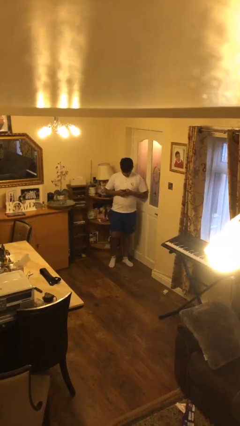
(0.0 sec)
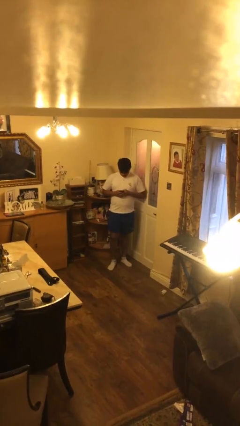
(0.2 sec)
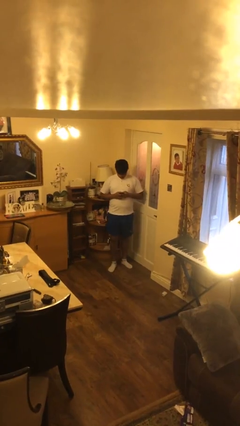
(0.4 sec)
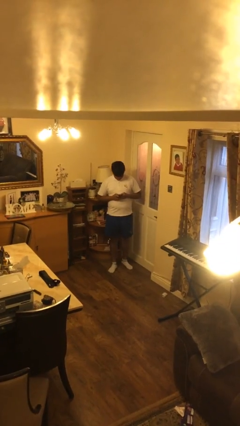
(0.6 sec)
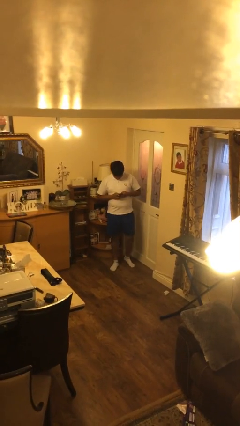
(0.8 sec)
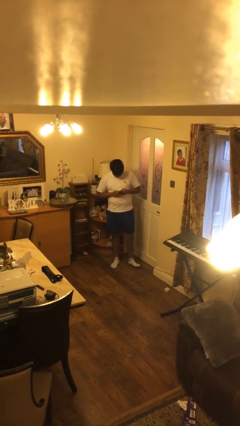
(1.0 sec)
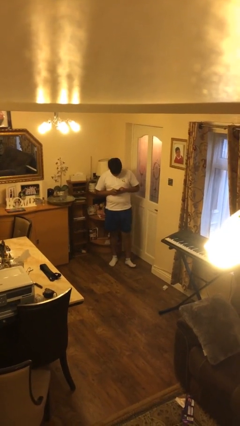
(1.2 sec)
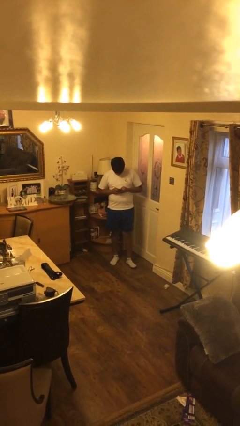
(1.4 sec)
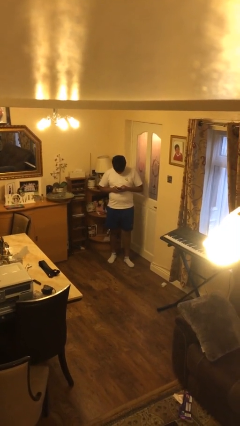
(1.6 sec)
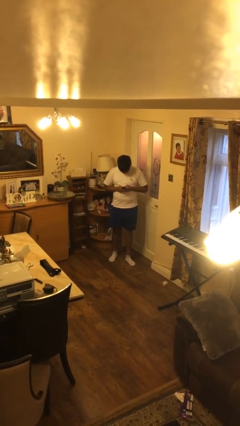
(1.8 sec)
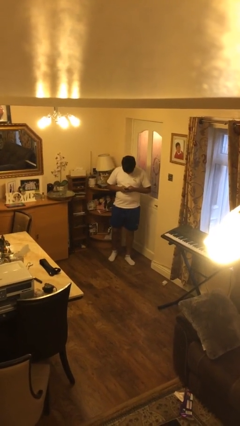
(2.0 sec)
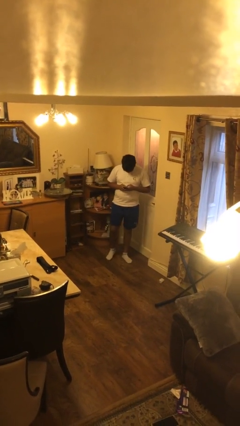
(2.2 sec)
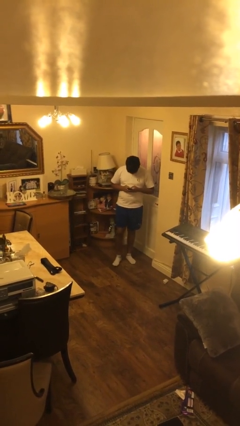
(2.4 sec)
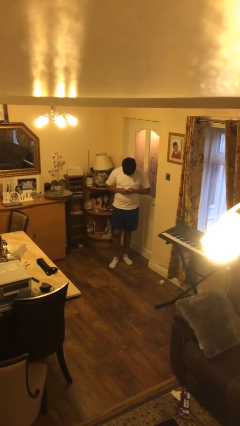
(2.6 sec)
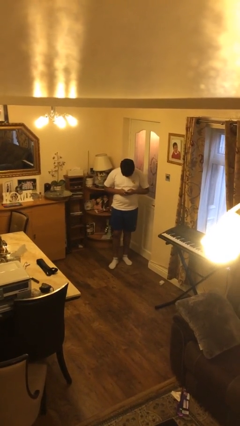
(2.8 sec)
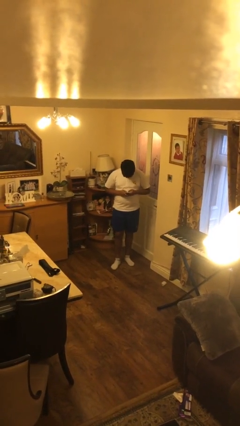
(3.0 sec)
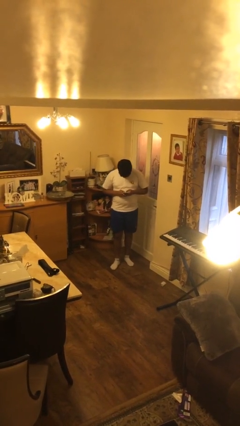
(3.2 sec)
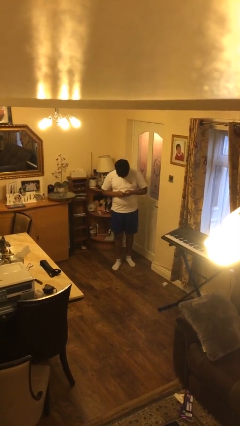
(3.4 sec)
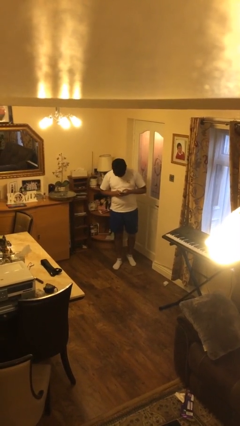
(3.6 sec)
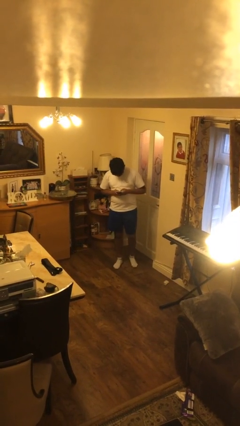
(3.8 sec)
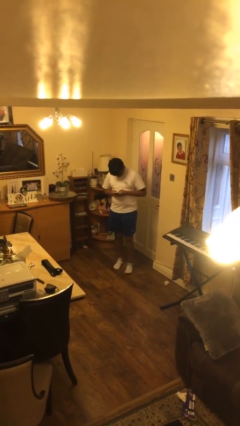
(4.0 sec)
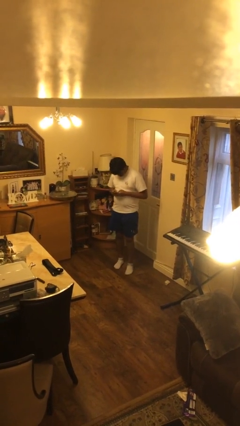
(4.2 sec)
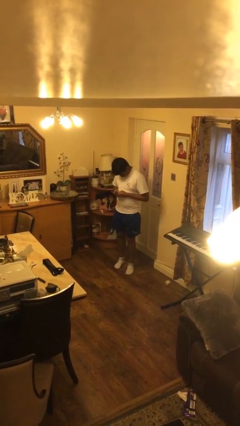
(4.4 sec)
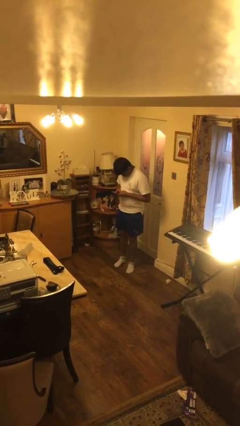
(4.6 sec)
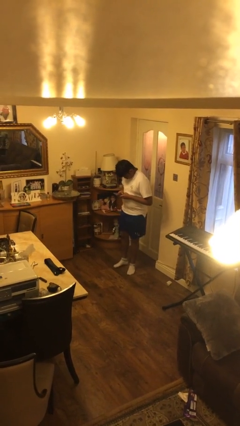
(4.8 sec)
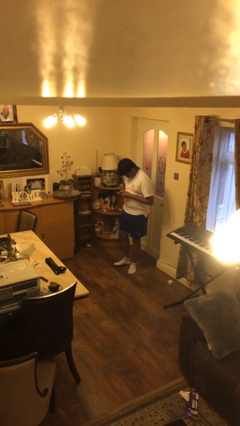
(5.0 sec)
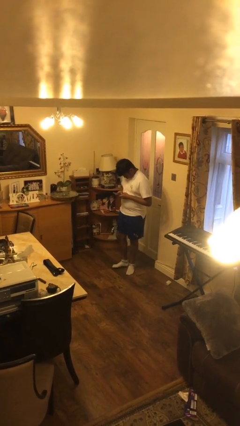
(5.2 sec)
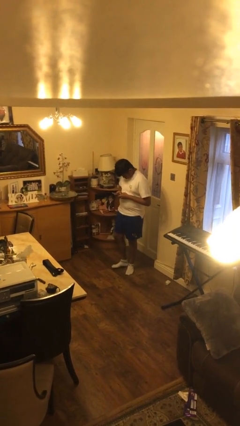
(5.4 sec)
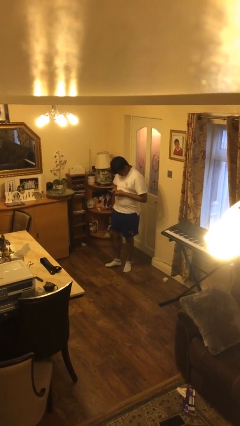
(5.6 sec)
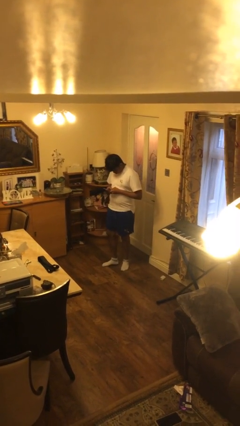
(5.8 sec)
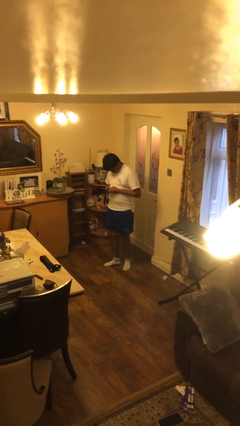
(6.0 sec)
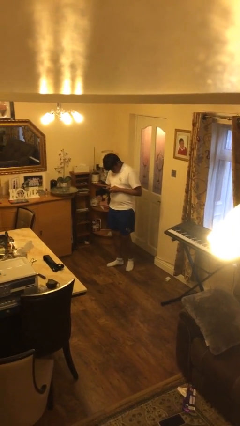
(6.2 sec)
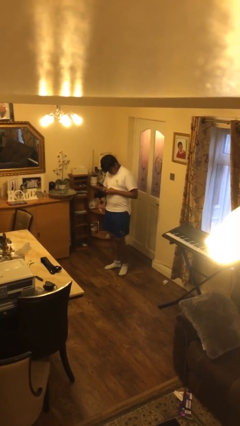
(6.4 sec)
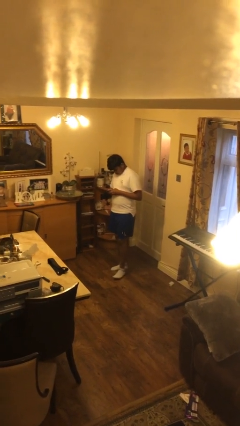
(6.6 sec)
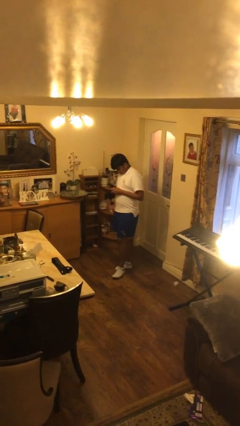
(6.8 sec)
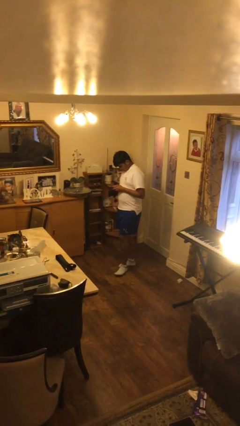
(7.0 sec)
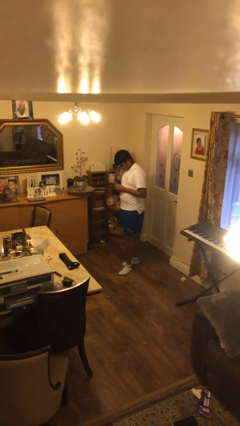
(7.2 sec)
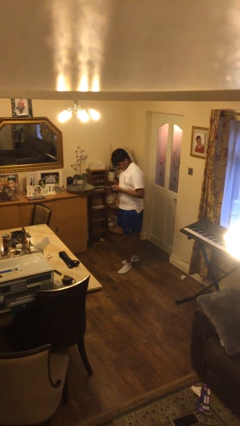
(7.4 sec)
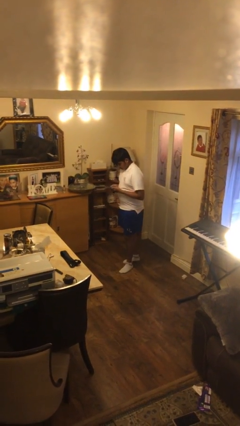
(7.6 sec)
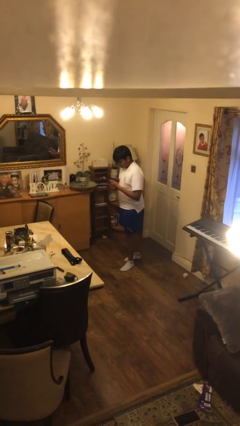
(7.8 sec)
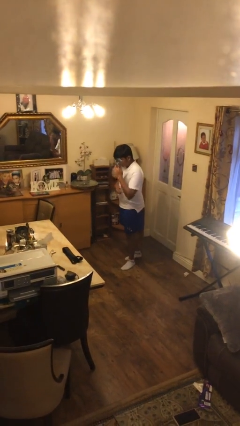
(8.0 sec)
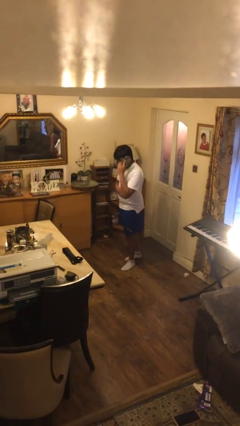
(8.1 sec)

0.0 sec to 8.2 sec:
person texts on phone

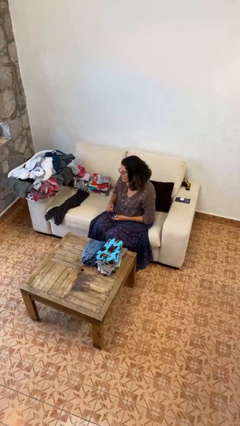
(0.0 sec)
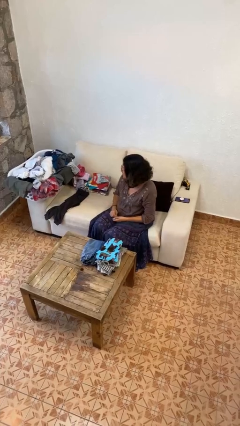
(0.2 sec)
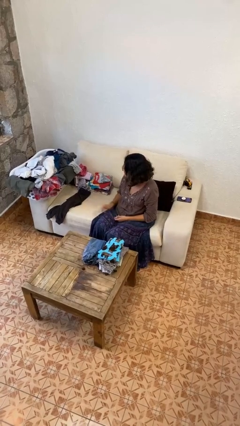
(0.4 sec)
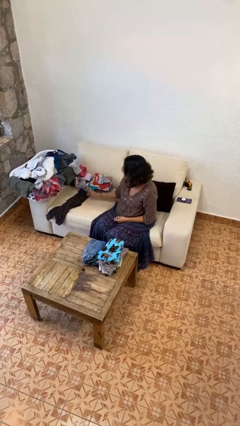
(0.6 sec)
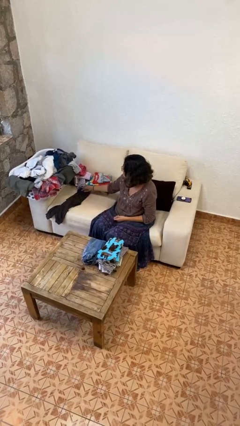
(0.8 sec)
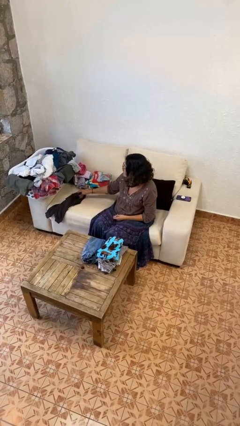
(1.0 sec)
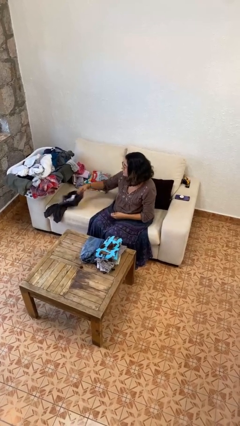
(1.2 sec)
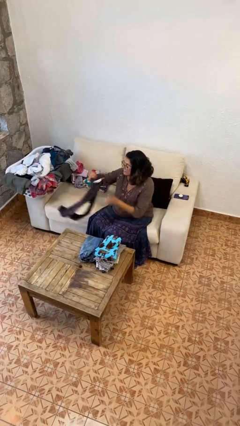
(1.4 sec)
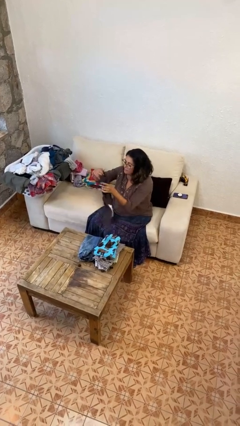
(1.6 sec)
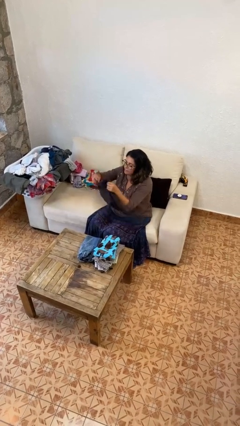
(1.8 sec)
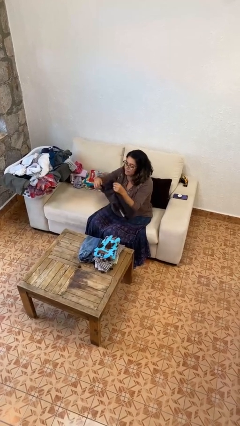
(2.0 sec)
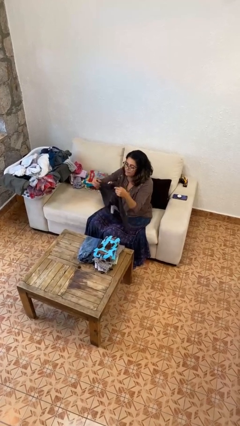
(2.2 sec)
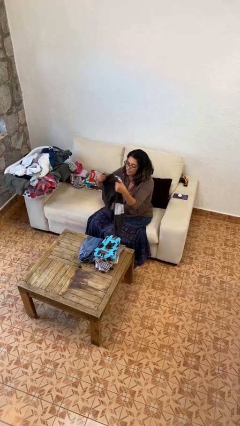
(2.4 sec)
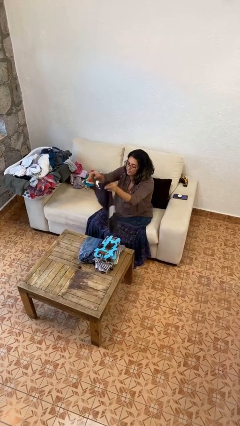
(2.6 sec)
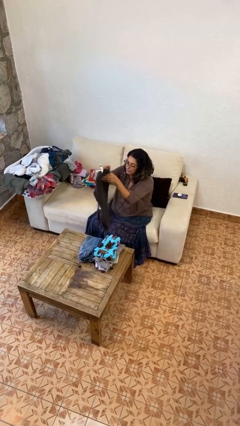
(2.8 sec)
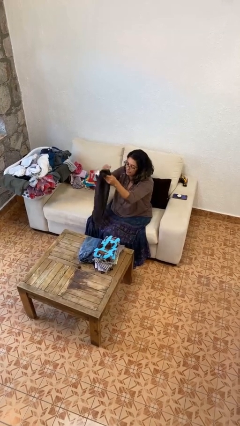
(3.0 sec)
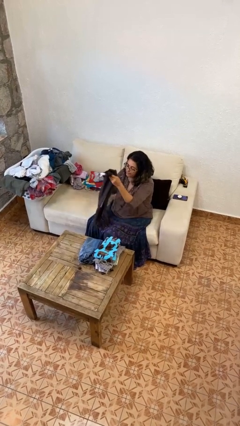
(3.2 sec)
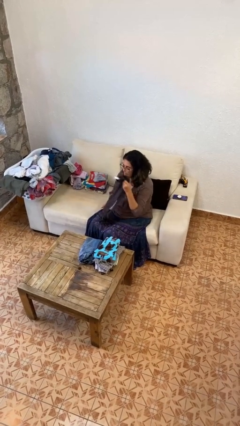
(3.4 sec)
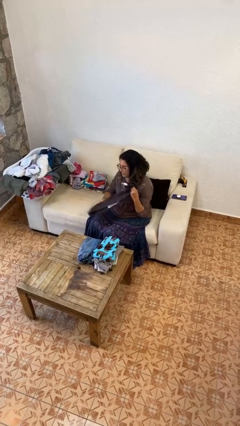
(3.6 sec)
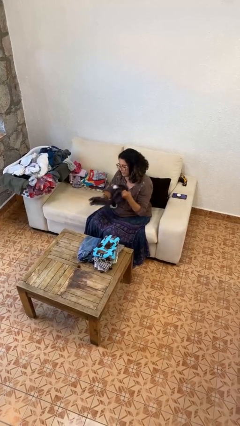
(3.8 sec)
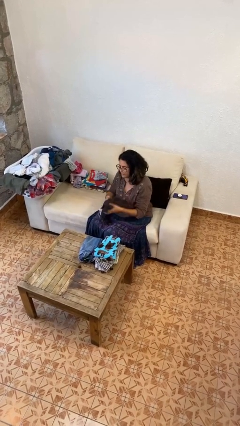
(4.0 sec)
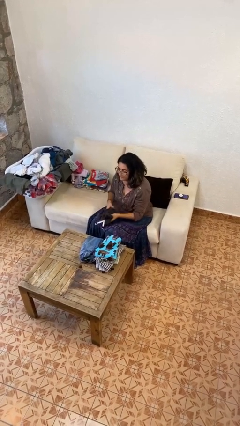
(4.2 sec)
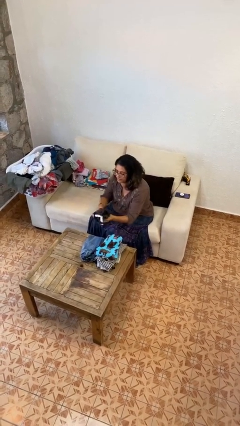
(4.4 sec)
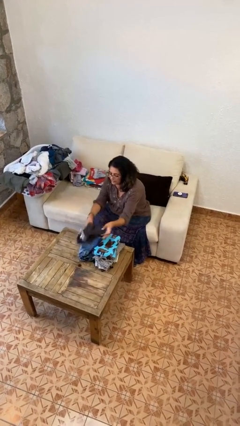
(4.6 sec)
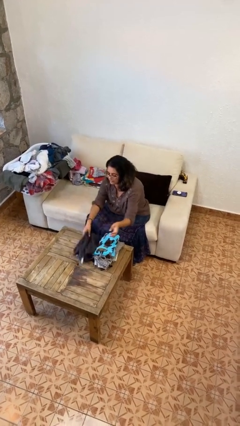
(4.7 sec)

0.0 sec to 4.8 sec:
person folds pants

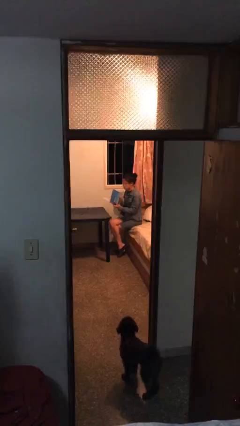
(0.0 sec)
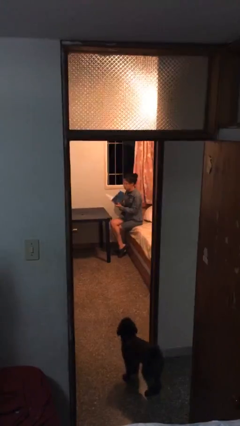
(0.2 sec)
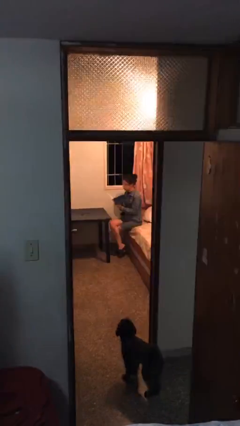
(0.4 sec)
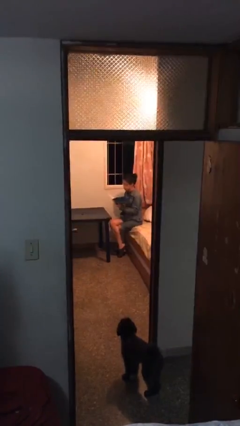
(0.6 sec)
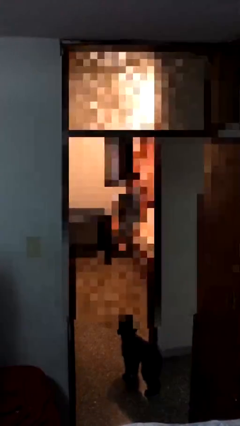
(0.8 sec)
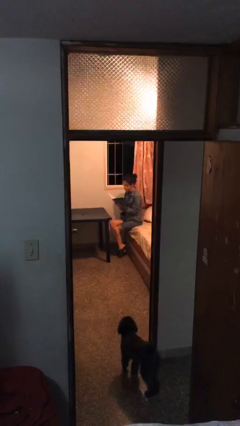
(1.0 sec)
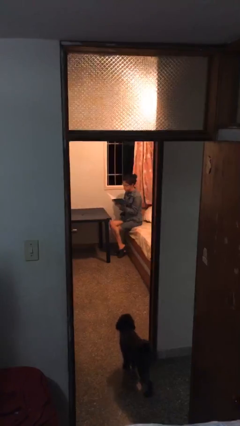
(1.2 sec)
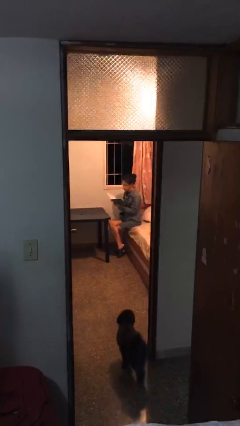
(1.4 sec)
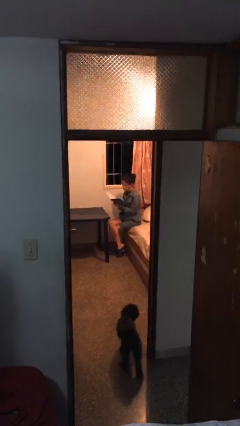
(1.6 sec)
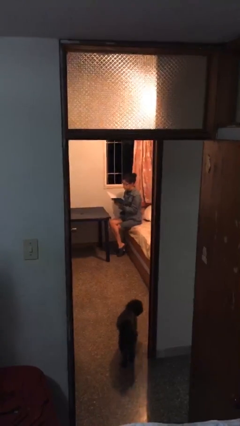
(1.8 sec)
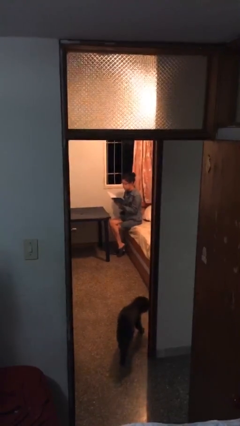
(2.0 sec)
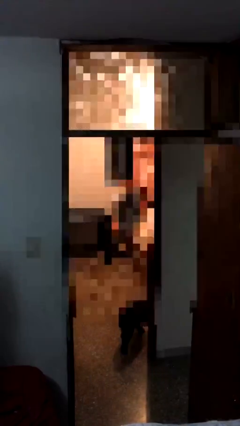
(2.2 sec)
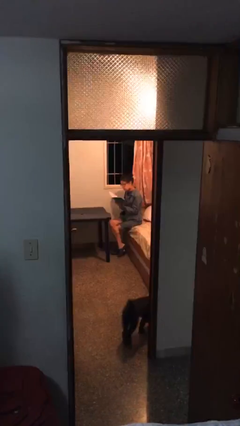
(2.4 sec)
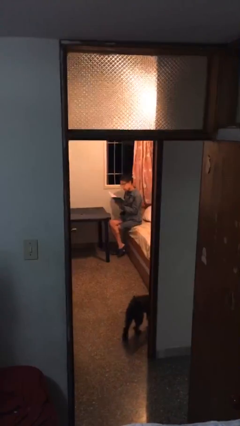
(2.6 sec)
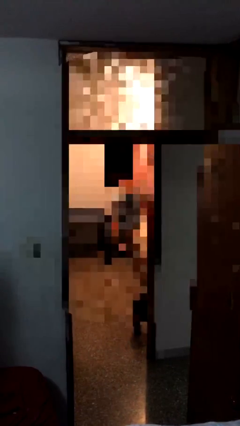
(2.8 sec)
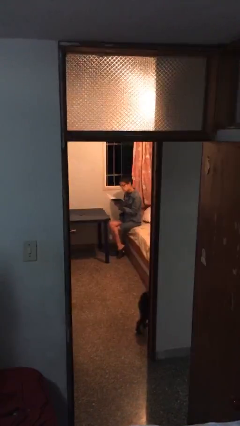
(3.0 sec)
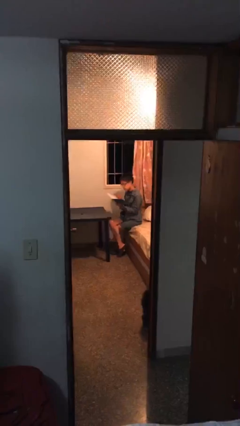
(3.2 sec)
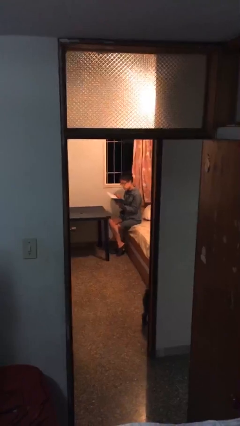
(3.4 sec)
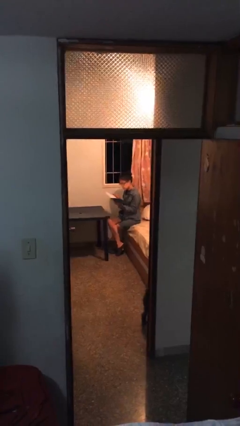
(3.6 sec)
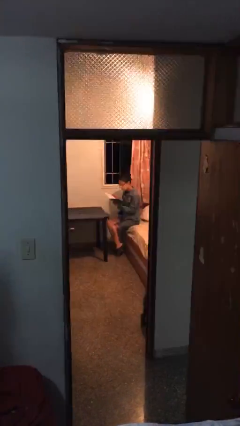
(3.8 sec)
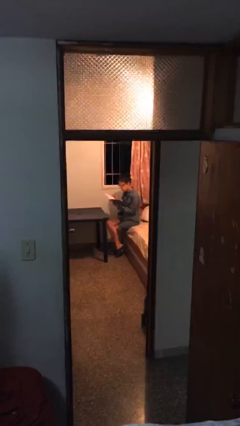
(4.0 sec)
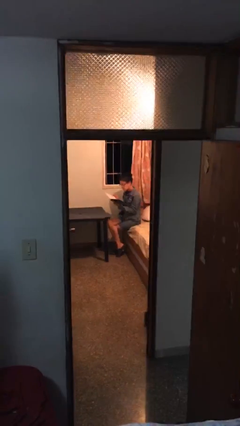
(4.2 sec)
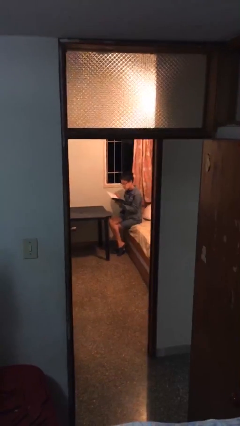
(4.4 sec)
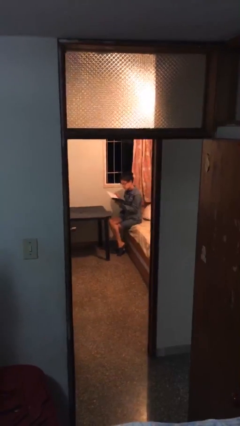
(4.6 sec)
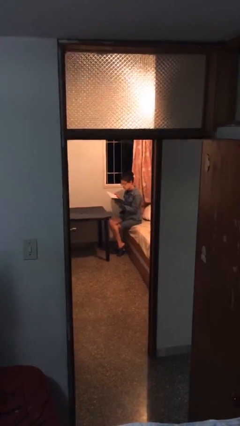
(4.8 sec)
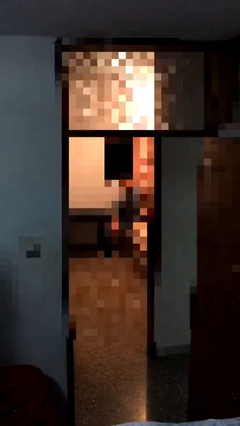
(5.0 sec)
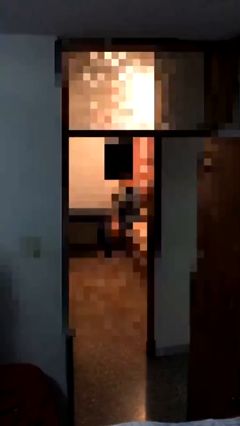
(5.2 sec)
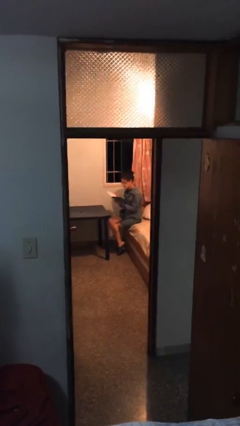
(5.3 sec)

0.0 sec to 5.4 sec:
person reads document
